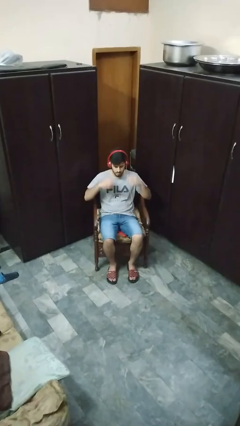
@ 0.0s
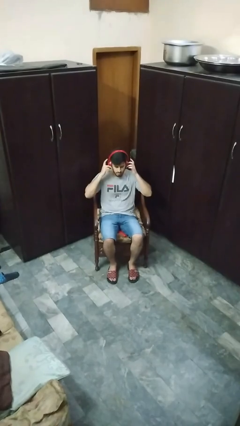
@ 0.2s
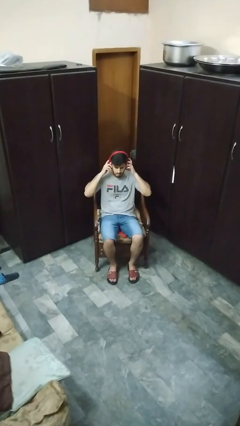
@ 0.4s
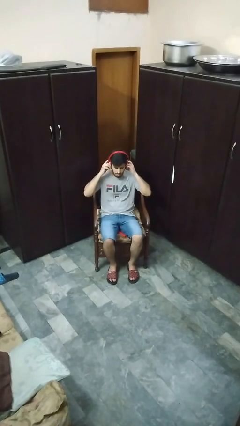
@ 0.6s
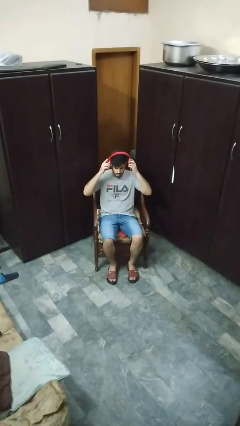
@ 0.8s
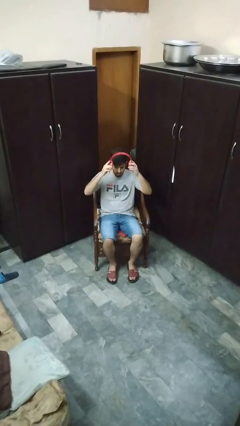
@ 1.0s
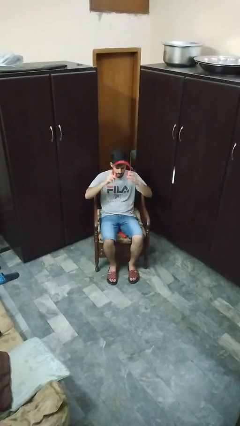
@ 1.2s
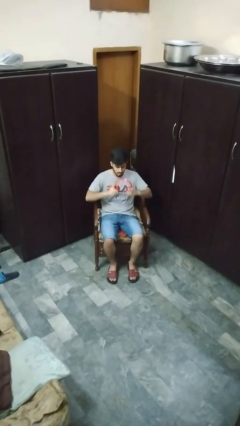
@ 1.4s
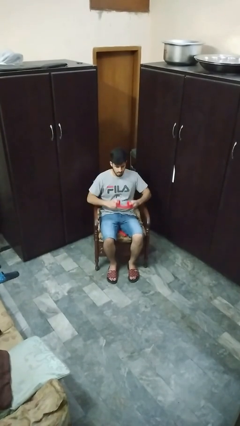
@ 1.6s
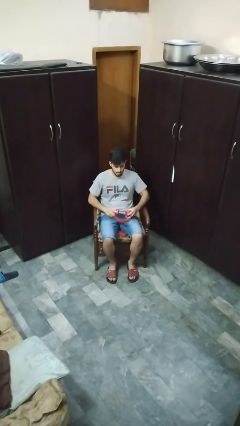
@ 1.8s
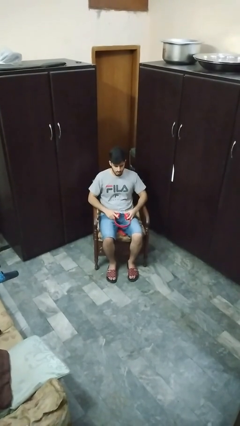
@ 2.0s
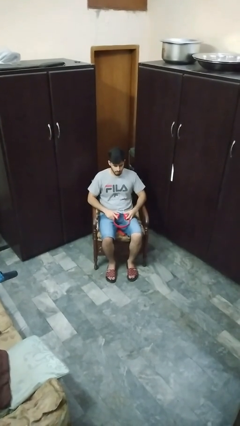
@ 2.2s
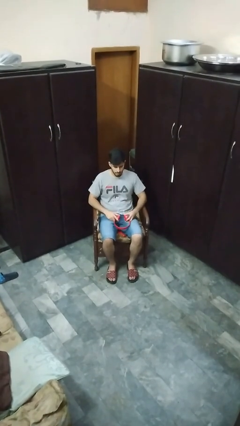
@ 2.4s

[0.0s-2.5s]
person takes off headphones

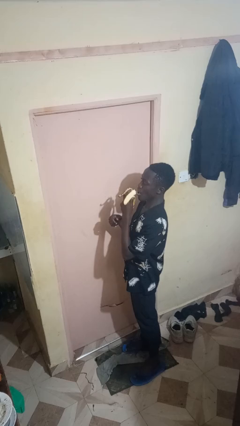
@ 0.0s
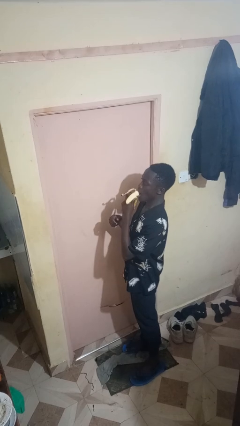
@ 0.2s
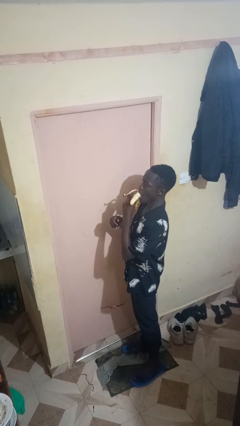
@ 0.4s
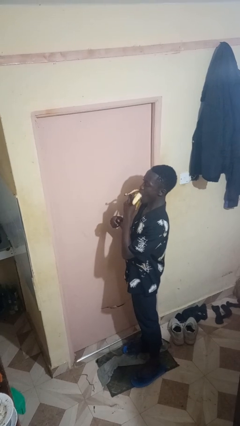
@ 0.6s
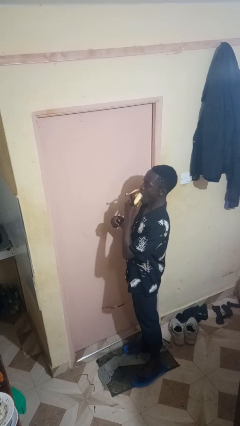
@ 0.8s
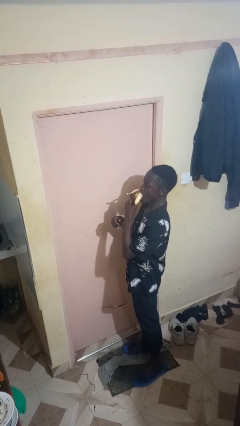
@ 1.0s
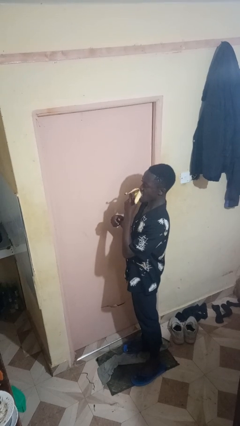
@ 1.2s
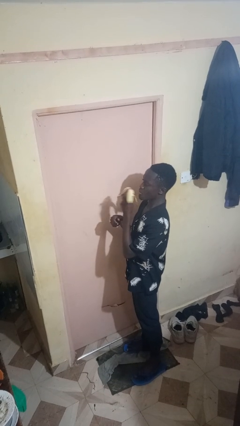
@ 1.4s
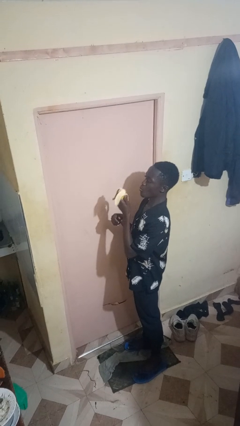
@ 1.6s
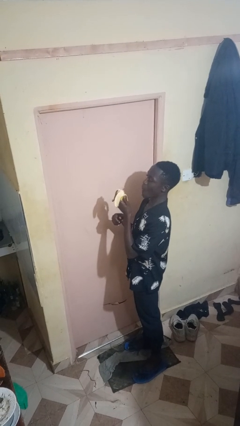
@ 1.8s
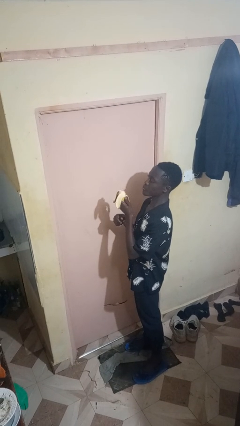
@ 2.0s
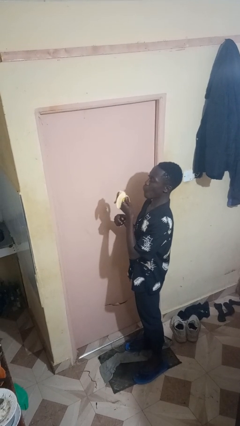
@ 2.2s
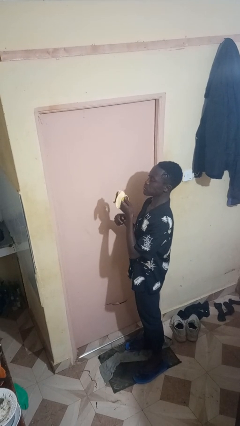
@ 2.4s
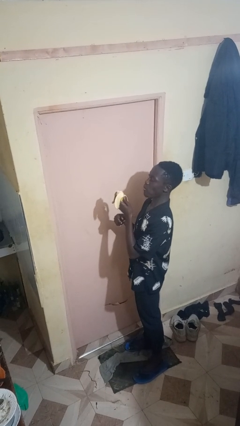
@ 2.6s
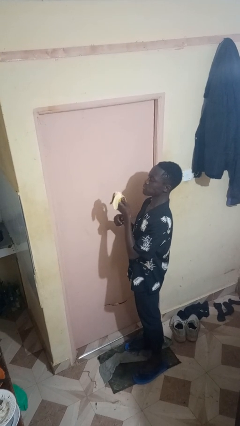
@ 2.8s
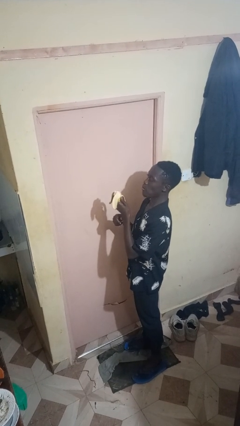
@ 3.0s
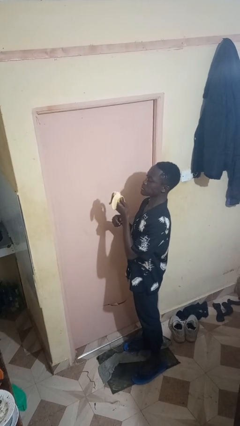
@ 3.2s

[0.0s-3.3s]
person eats banana

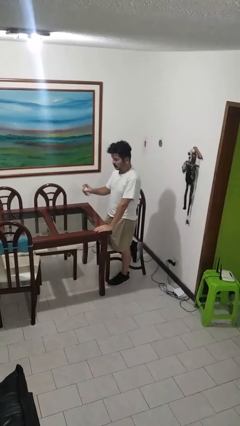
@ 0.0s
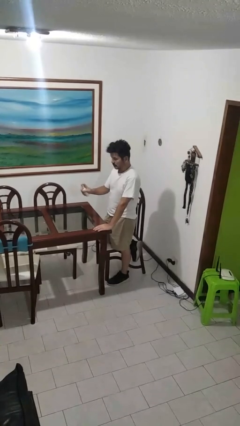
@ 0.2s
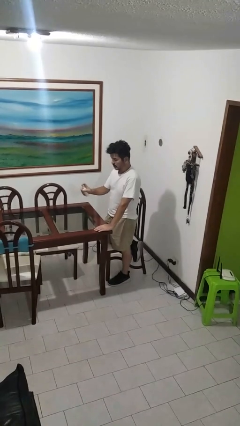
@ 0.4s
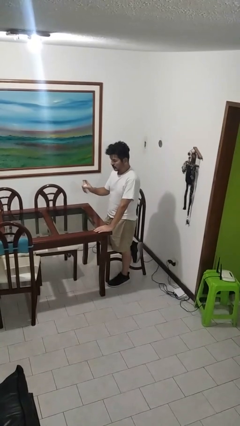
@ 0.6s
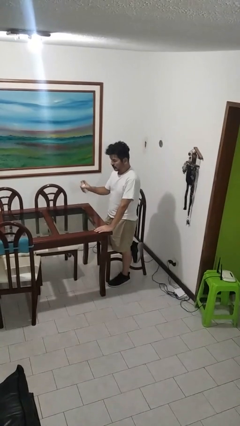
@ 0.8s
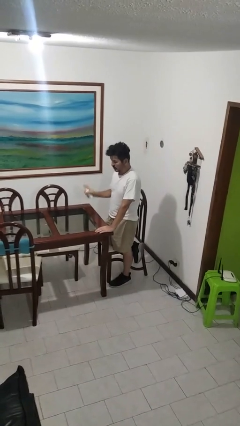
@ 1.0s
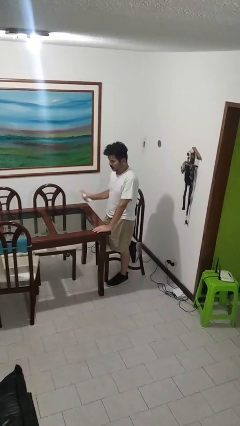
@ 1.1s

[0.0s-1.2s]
person sprays from bottle

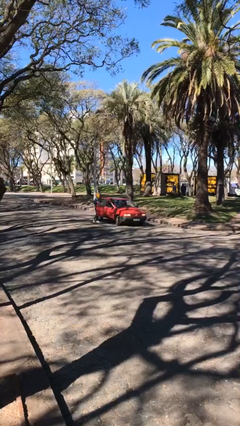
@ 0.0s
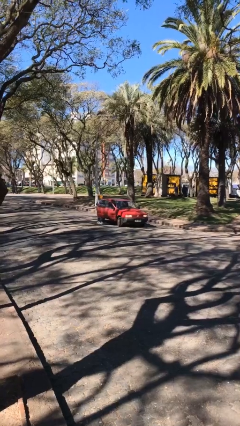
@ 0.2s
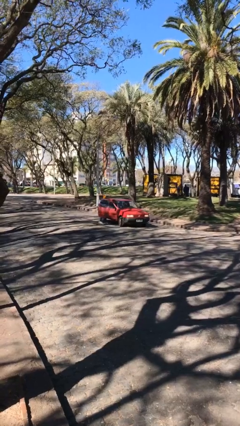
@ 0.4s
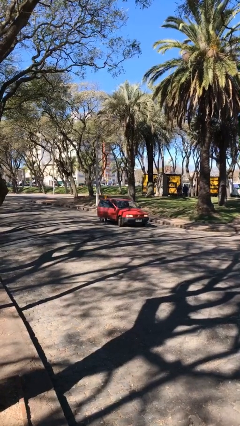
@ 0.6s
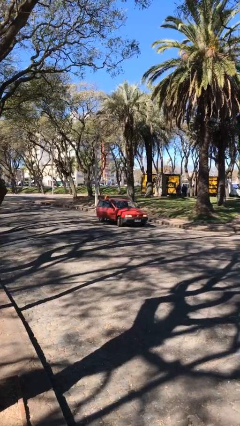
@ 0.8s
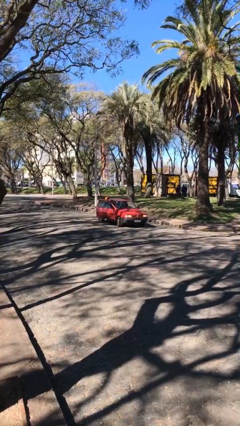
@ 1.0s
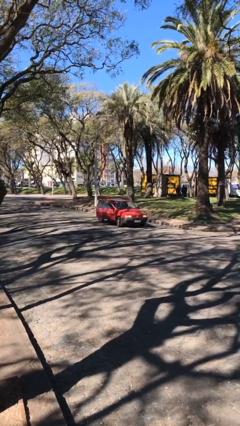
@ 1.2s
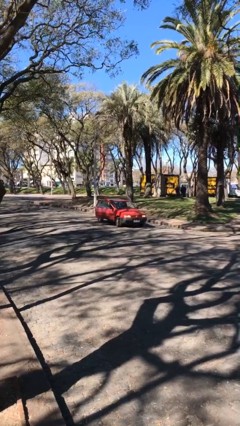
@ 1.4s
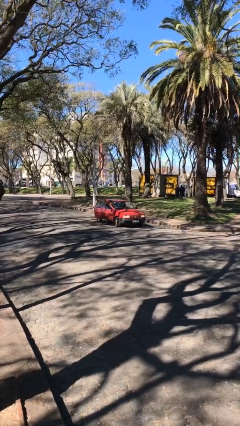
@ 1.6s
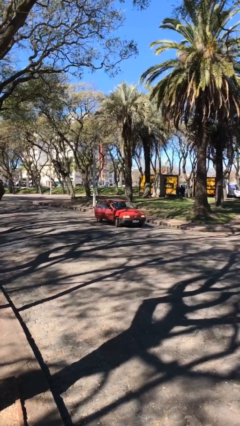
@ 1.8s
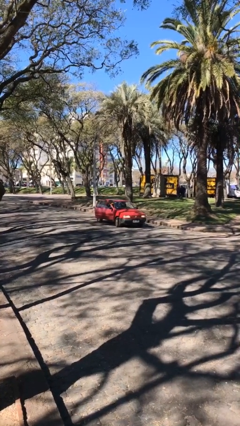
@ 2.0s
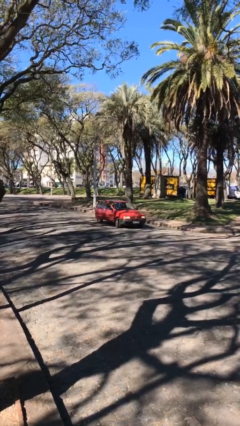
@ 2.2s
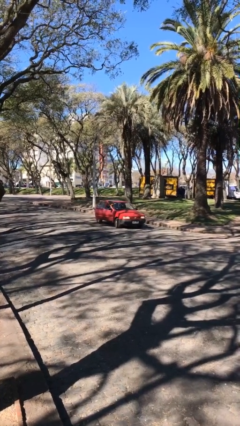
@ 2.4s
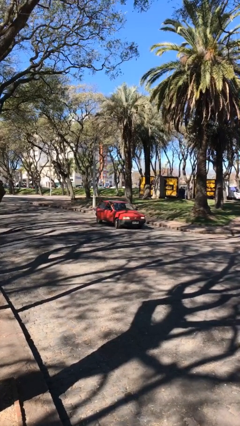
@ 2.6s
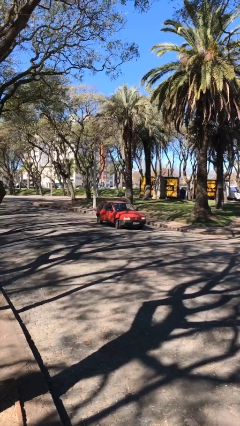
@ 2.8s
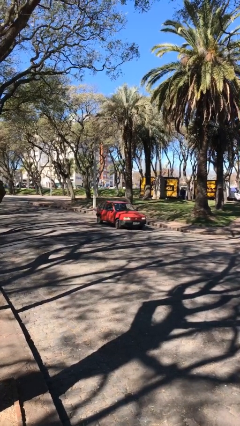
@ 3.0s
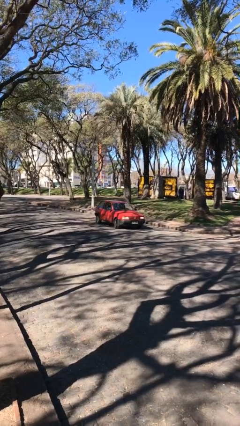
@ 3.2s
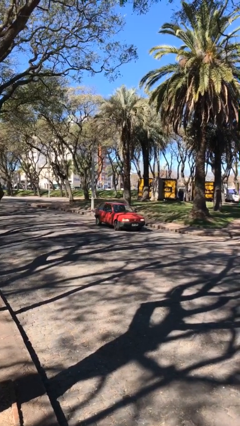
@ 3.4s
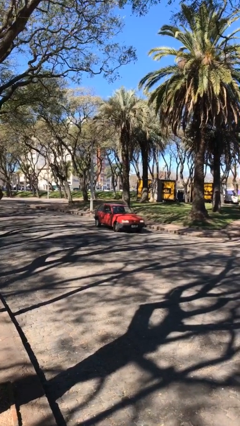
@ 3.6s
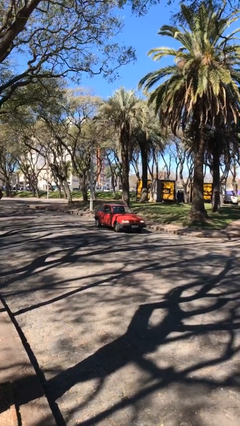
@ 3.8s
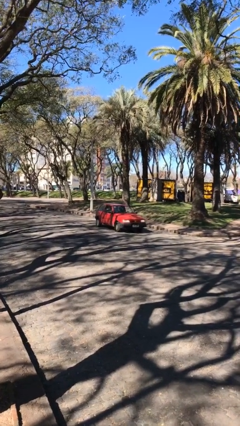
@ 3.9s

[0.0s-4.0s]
car picks up person

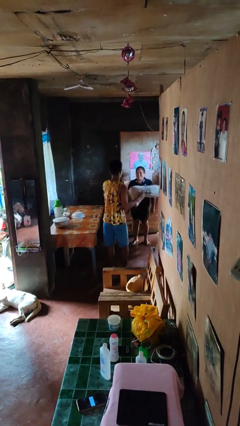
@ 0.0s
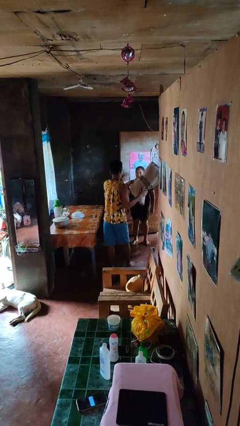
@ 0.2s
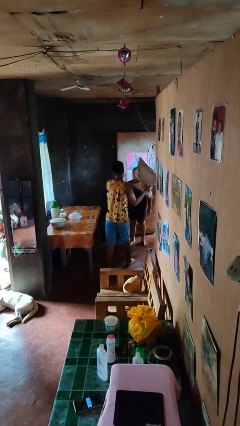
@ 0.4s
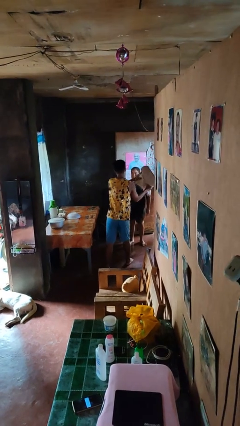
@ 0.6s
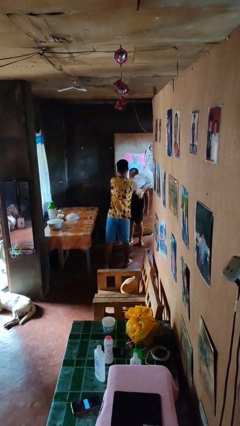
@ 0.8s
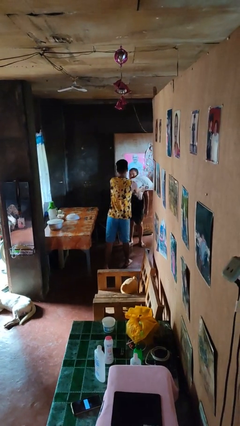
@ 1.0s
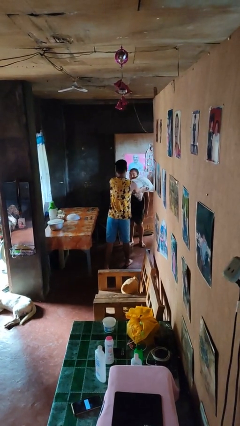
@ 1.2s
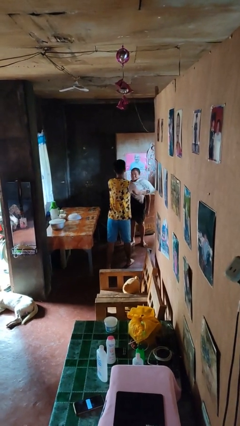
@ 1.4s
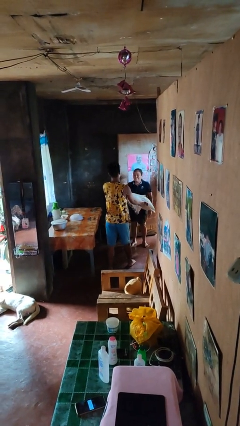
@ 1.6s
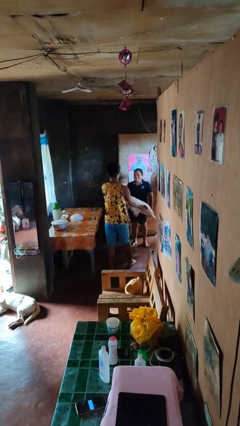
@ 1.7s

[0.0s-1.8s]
person hits person with pillow

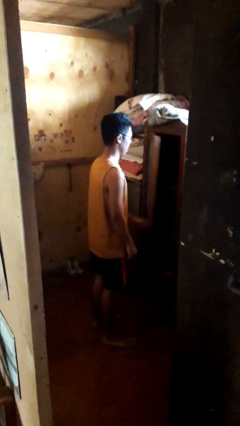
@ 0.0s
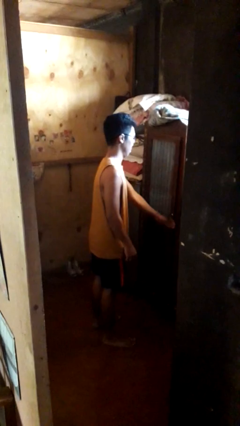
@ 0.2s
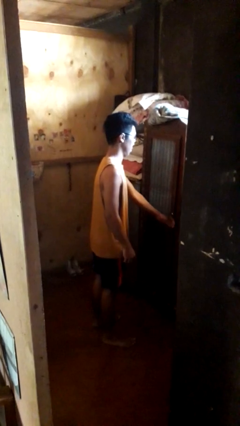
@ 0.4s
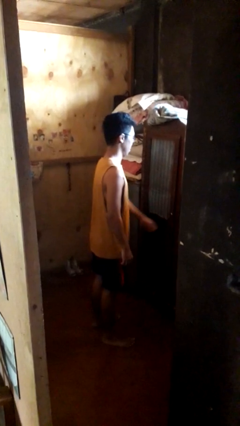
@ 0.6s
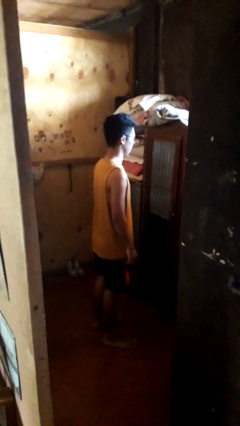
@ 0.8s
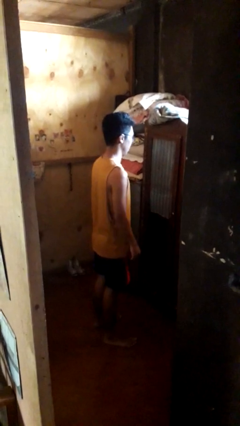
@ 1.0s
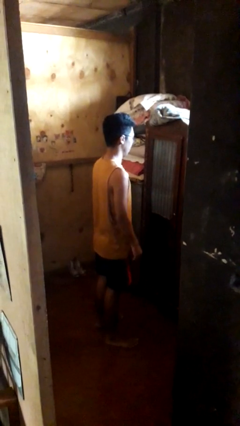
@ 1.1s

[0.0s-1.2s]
person closes closet door

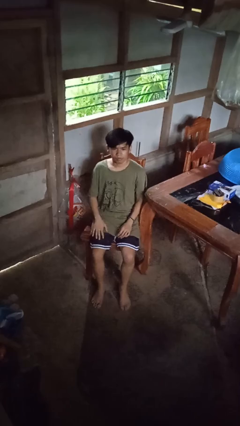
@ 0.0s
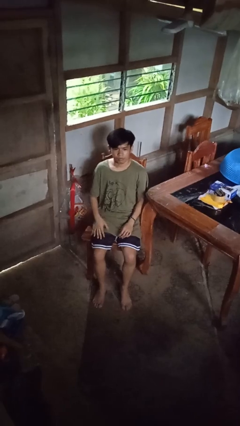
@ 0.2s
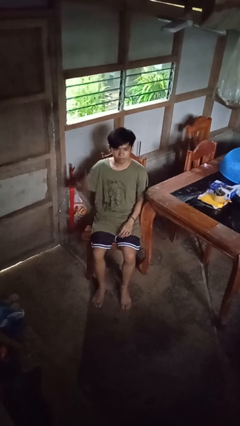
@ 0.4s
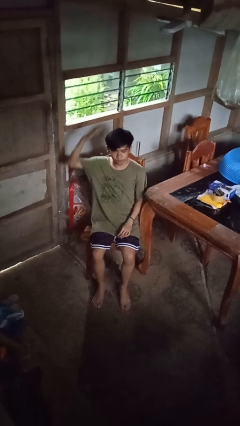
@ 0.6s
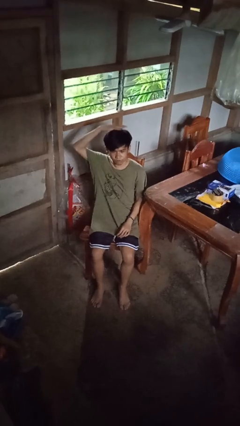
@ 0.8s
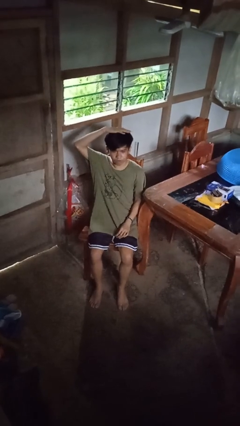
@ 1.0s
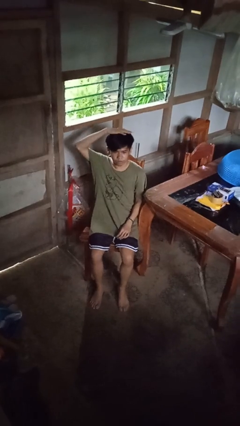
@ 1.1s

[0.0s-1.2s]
person pats head

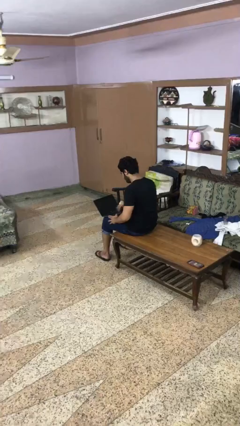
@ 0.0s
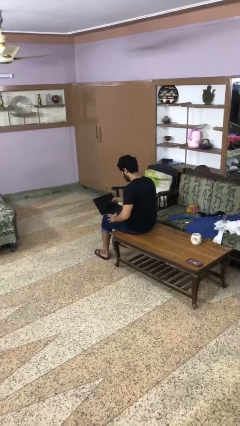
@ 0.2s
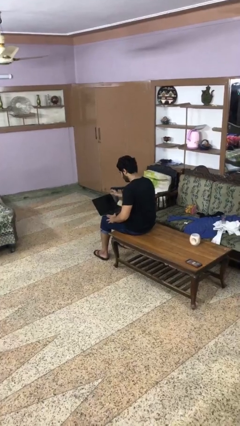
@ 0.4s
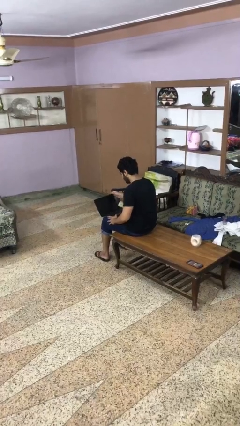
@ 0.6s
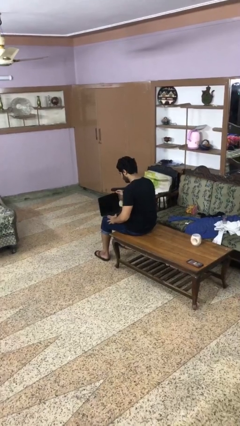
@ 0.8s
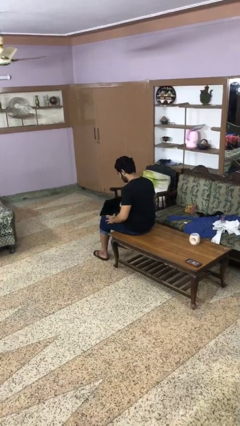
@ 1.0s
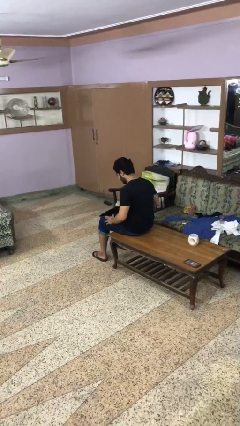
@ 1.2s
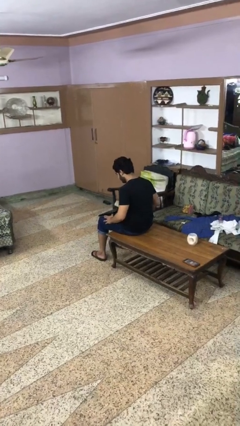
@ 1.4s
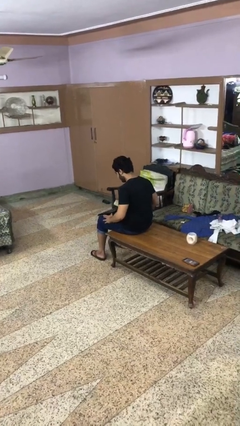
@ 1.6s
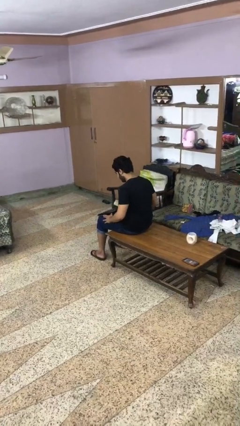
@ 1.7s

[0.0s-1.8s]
person closes laptop

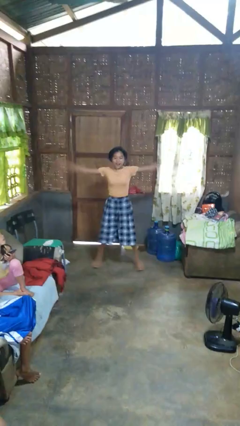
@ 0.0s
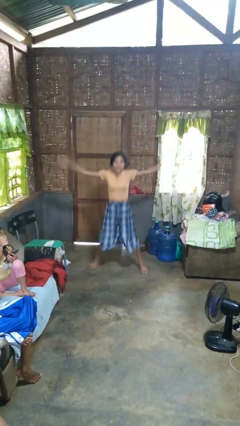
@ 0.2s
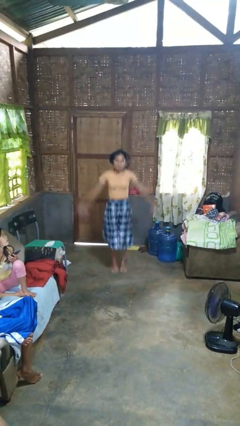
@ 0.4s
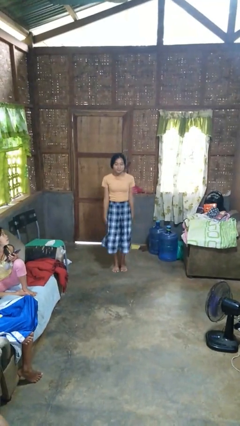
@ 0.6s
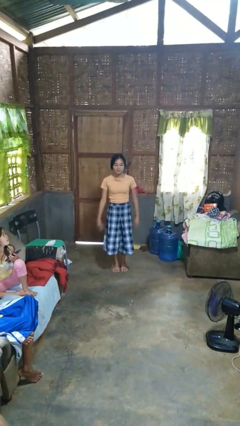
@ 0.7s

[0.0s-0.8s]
person exercises with jumping jacks
